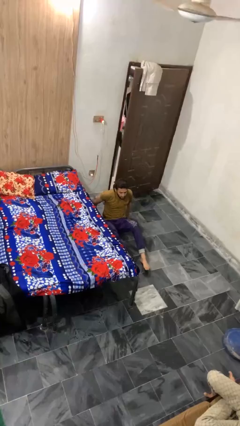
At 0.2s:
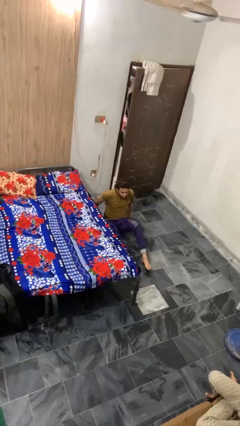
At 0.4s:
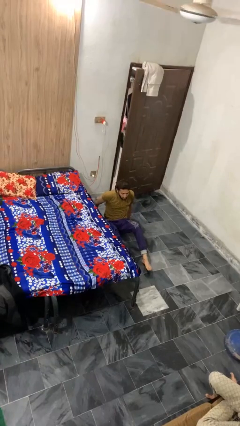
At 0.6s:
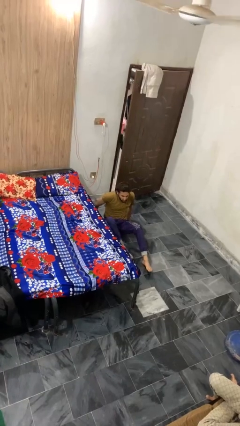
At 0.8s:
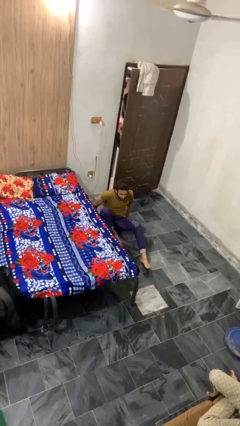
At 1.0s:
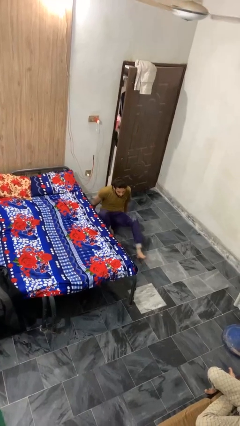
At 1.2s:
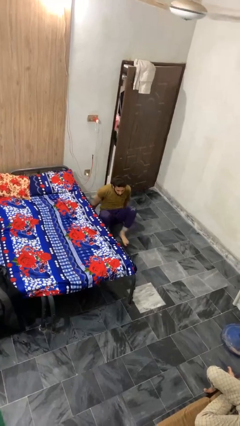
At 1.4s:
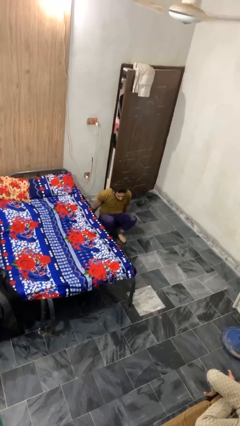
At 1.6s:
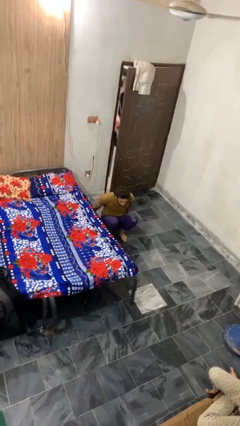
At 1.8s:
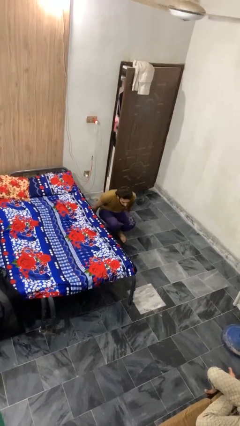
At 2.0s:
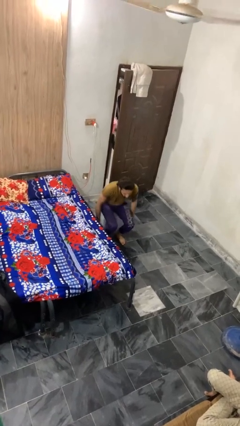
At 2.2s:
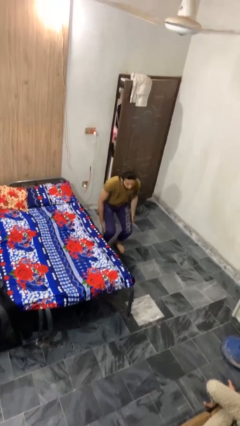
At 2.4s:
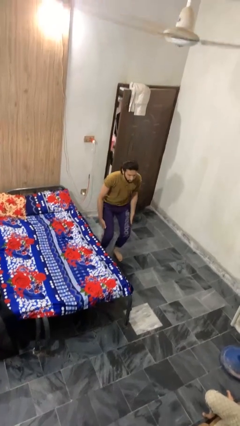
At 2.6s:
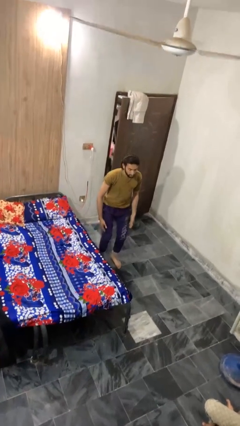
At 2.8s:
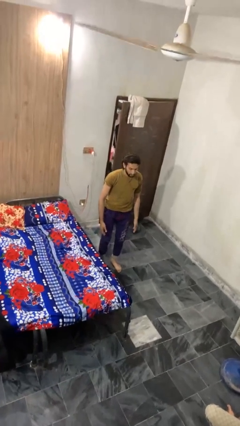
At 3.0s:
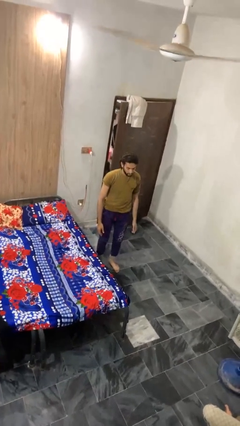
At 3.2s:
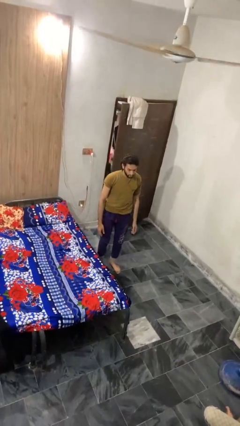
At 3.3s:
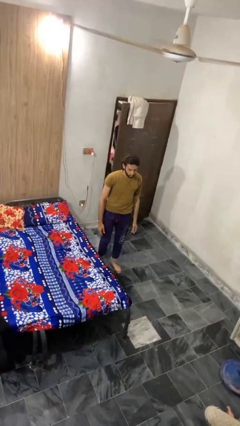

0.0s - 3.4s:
person stands up from floor

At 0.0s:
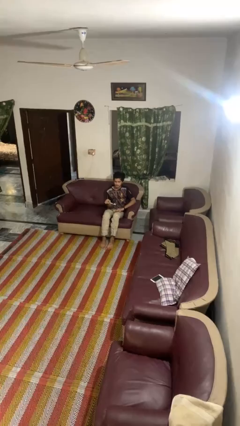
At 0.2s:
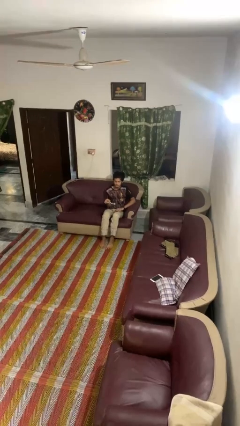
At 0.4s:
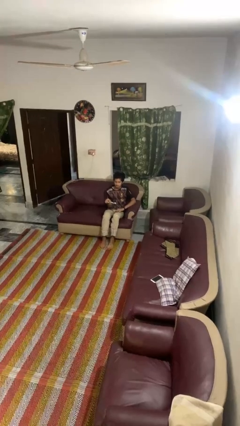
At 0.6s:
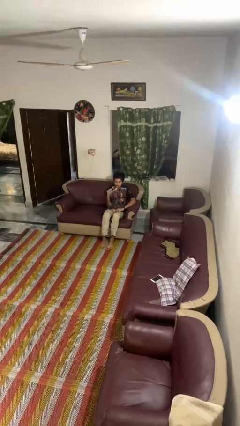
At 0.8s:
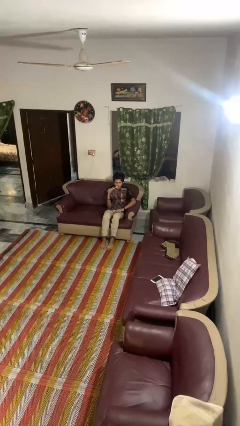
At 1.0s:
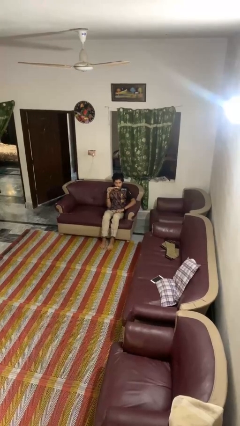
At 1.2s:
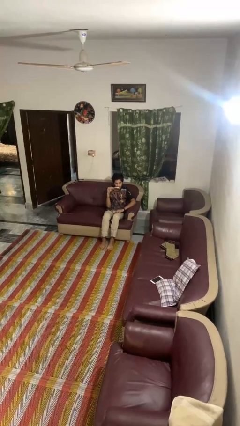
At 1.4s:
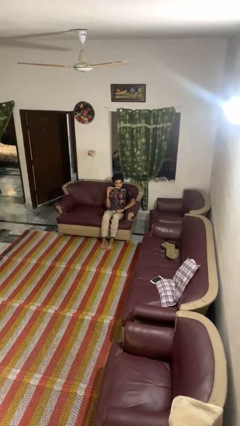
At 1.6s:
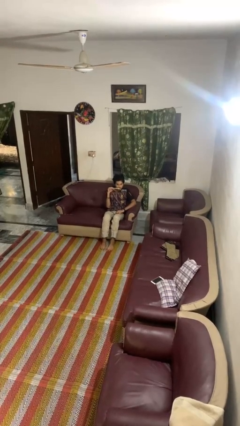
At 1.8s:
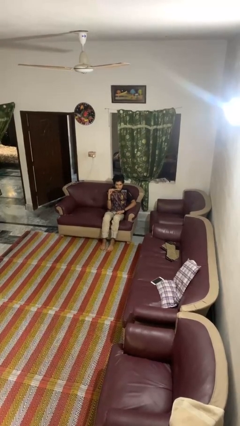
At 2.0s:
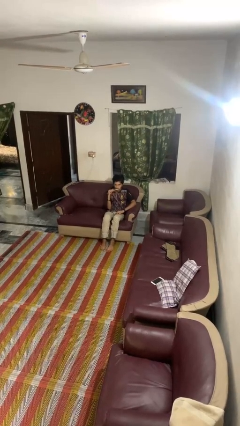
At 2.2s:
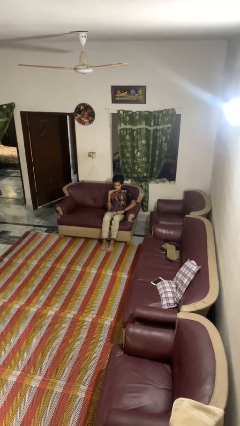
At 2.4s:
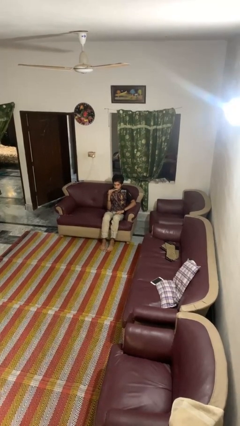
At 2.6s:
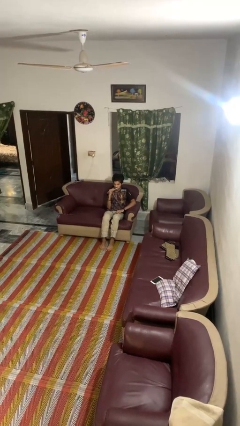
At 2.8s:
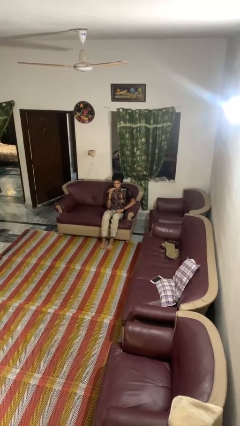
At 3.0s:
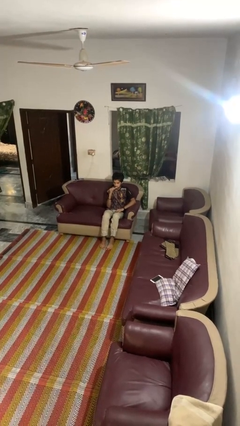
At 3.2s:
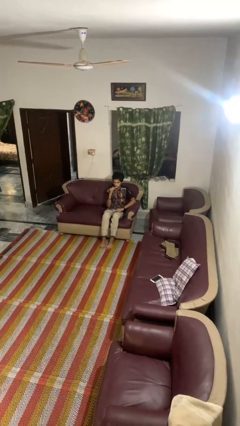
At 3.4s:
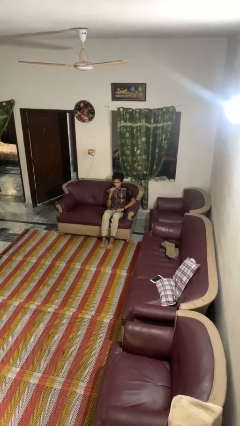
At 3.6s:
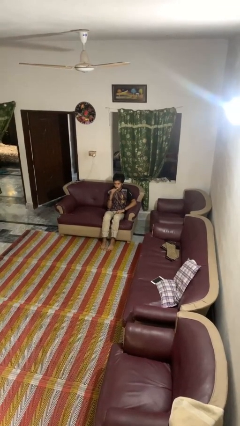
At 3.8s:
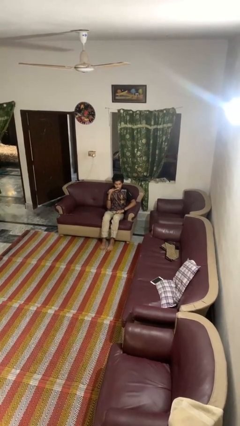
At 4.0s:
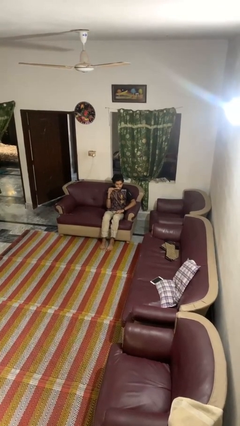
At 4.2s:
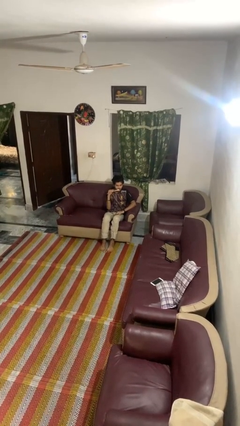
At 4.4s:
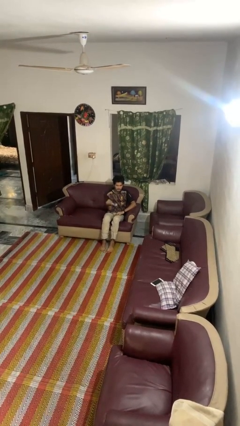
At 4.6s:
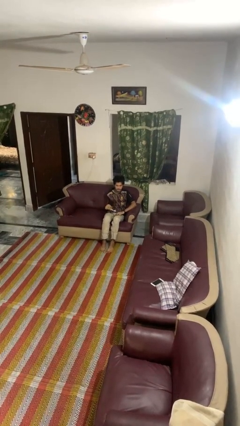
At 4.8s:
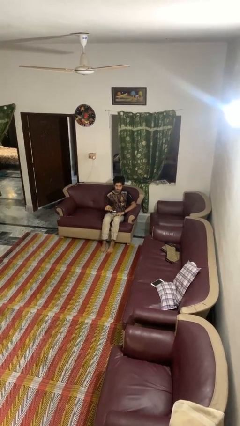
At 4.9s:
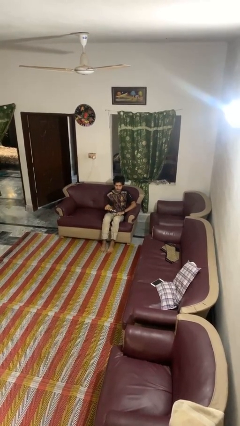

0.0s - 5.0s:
person brushes teeth

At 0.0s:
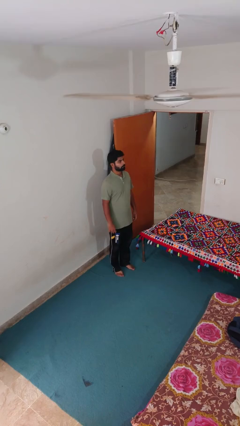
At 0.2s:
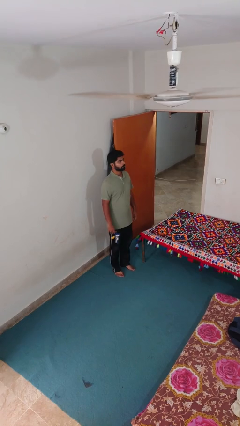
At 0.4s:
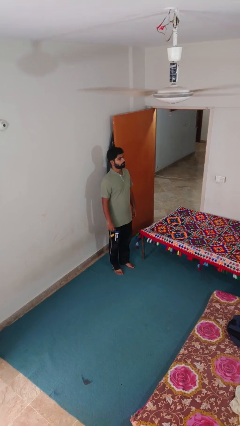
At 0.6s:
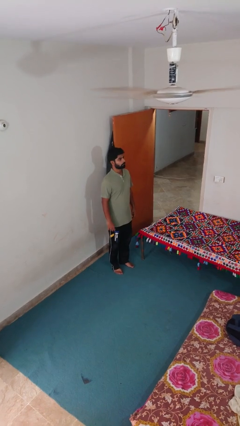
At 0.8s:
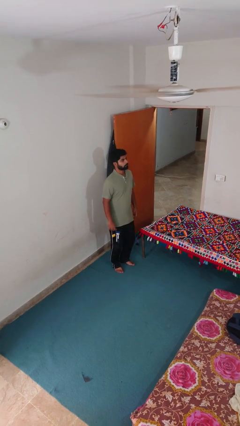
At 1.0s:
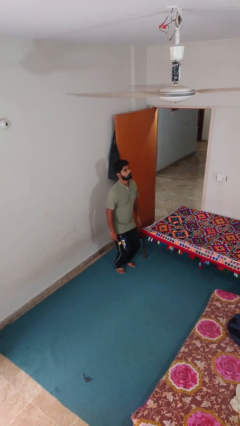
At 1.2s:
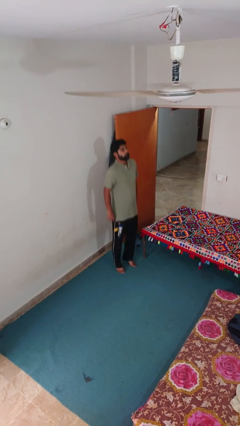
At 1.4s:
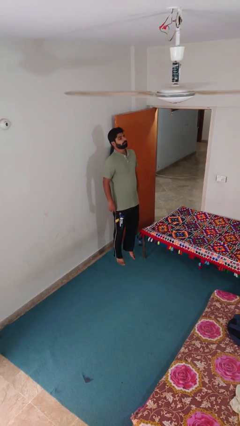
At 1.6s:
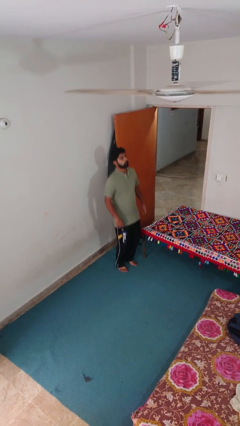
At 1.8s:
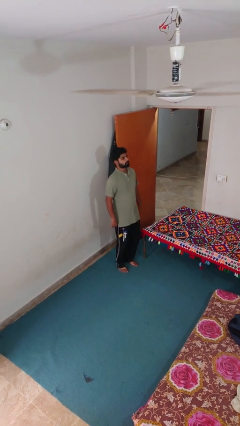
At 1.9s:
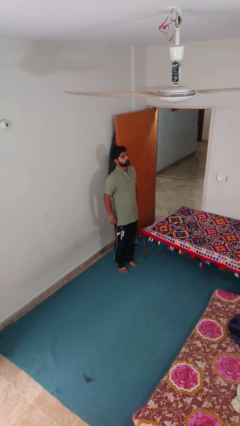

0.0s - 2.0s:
person jumps

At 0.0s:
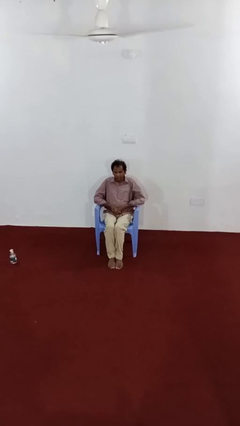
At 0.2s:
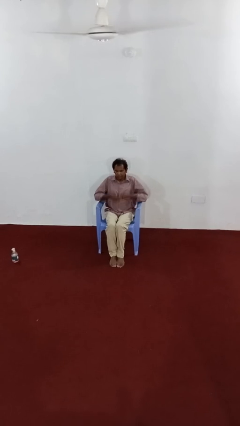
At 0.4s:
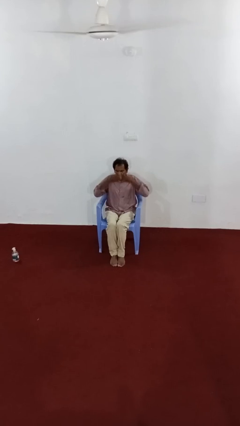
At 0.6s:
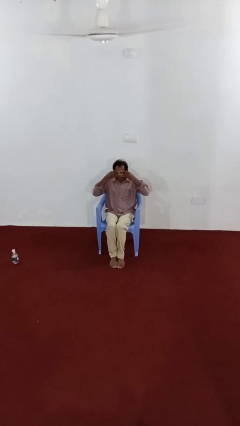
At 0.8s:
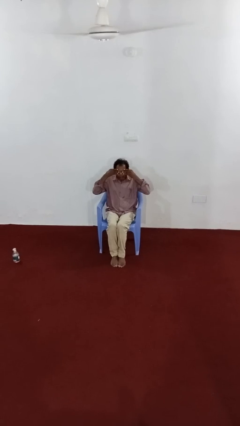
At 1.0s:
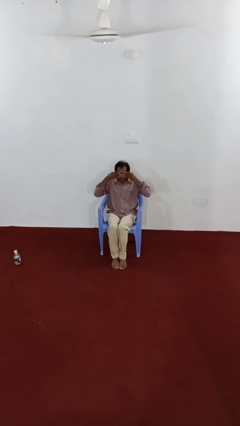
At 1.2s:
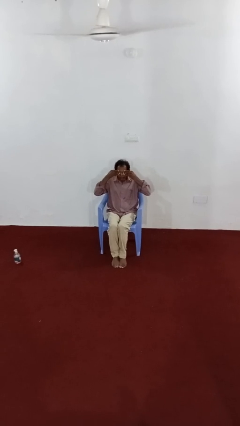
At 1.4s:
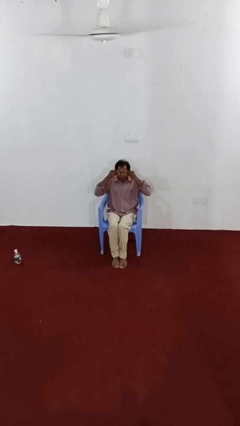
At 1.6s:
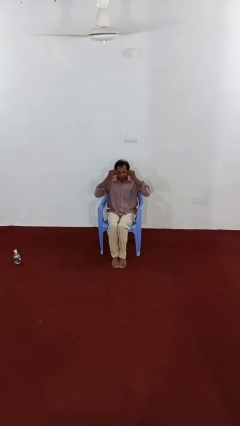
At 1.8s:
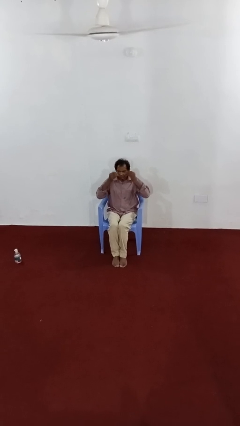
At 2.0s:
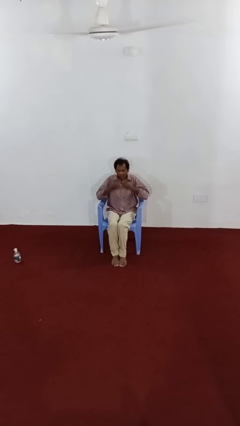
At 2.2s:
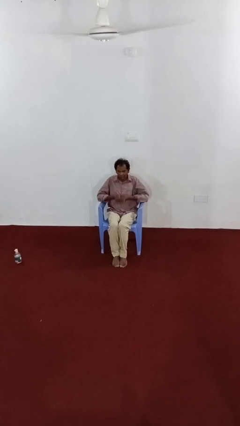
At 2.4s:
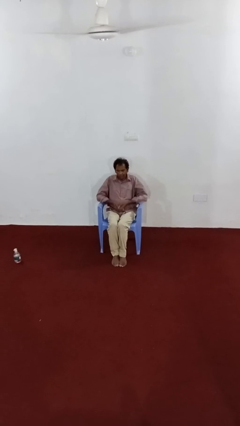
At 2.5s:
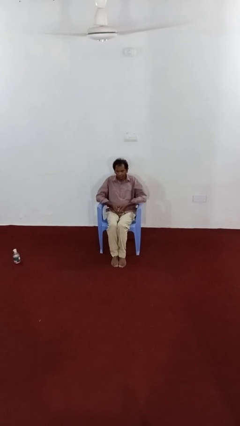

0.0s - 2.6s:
person rubs eyes

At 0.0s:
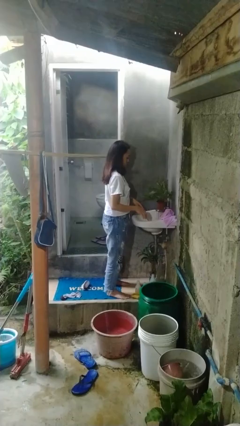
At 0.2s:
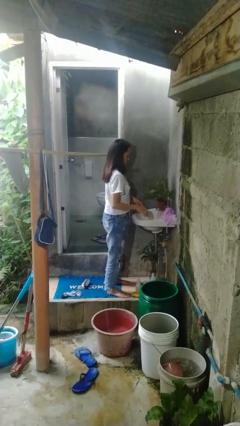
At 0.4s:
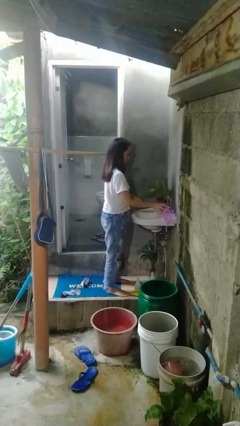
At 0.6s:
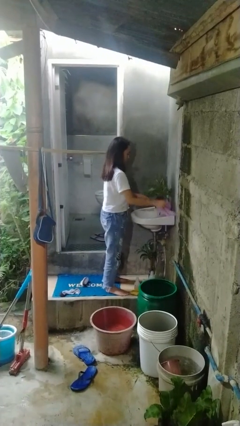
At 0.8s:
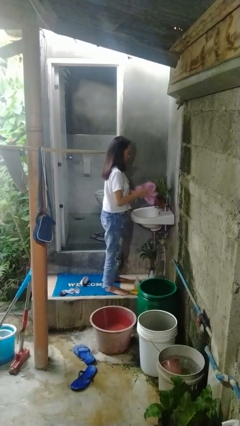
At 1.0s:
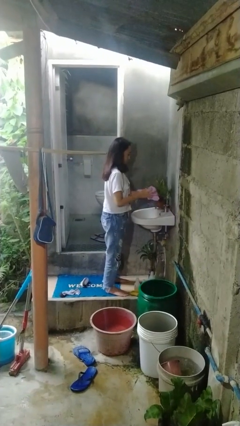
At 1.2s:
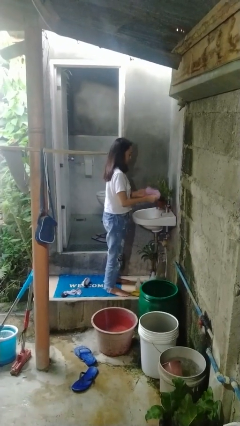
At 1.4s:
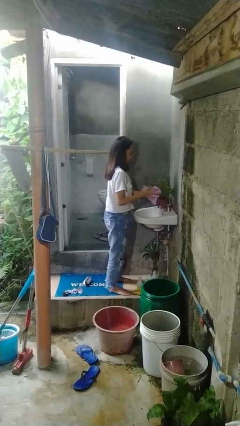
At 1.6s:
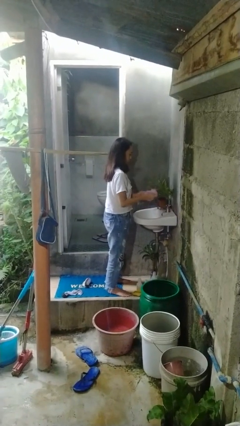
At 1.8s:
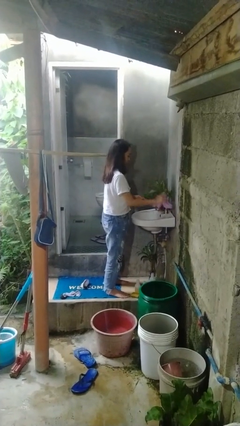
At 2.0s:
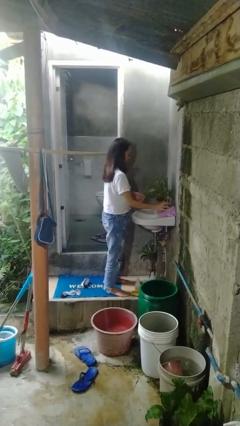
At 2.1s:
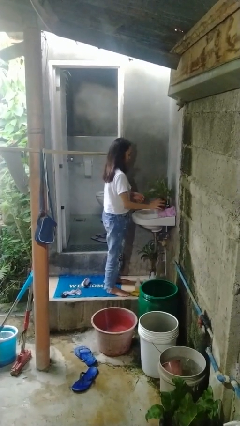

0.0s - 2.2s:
person dries hands with towel

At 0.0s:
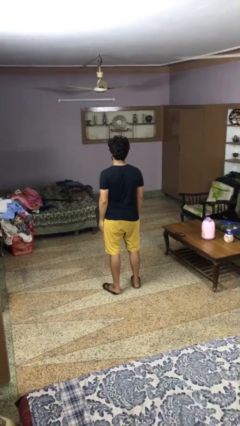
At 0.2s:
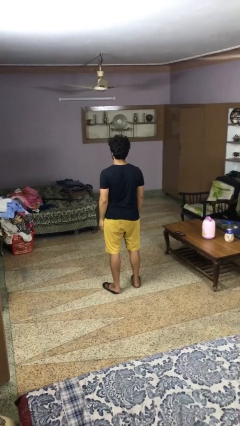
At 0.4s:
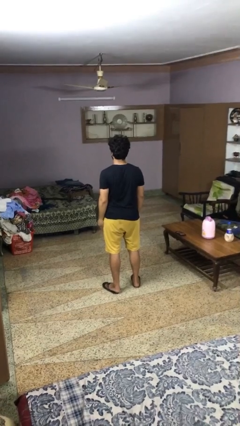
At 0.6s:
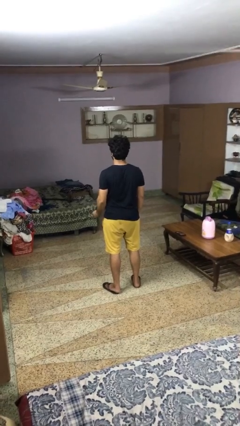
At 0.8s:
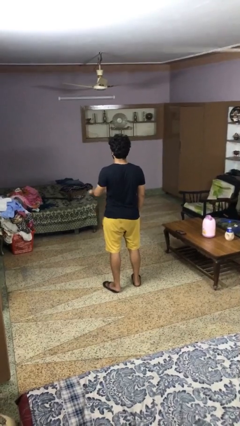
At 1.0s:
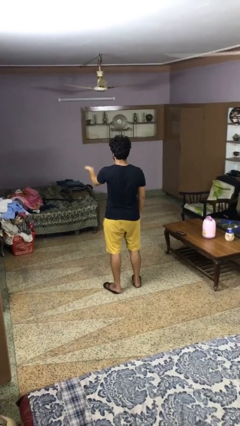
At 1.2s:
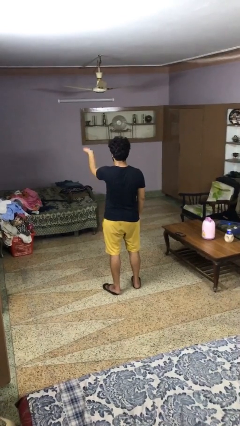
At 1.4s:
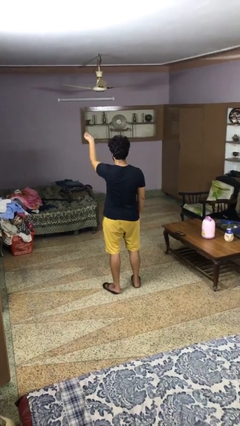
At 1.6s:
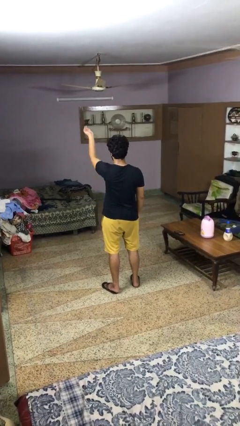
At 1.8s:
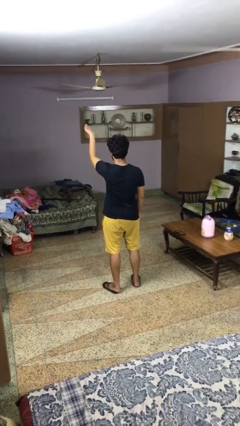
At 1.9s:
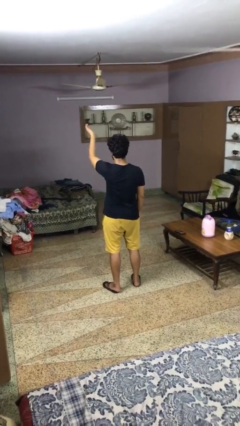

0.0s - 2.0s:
person gestures swipe up

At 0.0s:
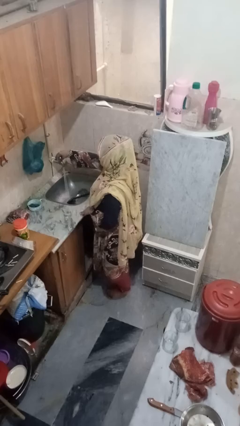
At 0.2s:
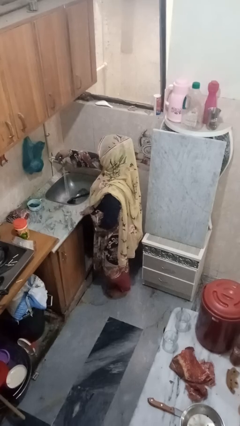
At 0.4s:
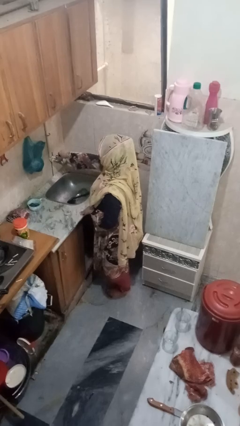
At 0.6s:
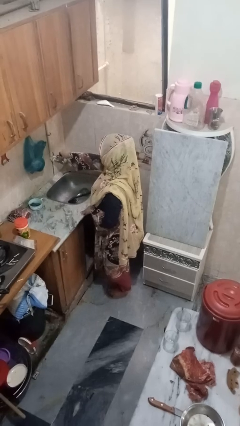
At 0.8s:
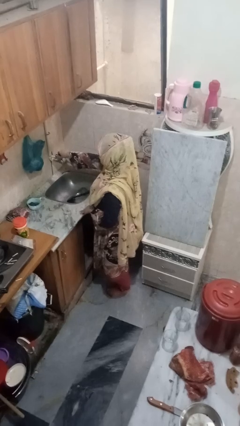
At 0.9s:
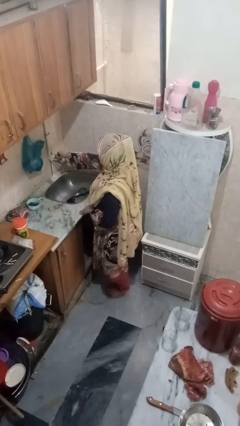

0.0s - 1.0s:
person turns off faucet
